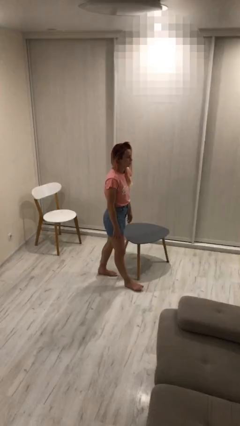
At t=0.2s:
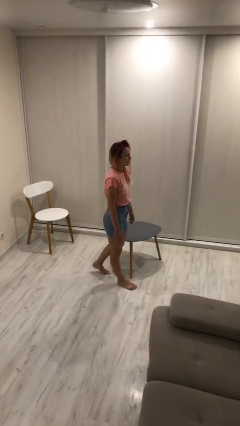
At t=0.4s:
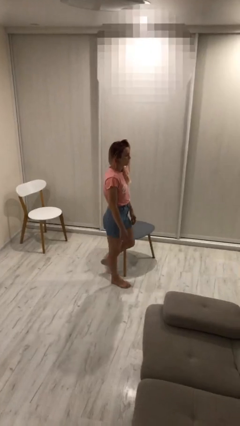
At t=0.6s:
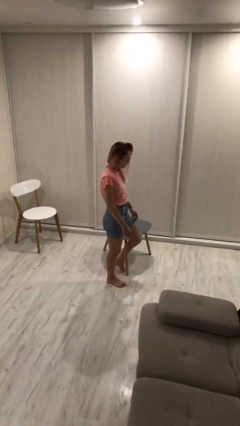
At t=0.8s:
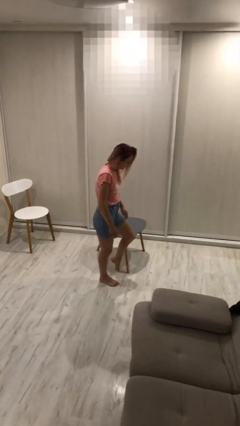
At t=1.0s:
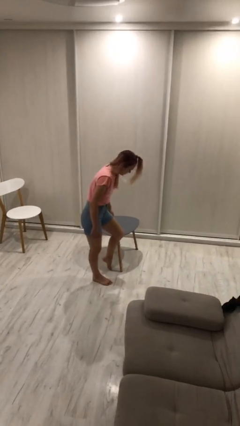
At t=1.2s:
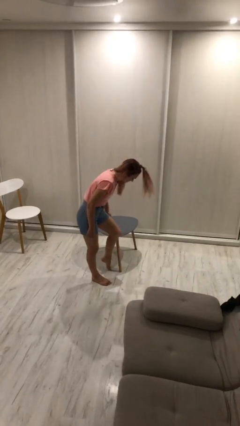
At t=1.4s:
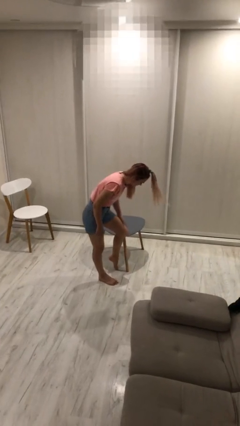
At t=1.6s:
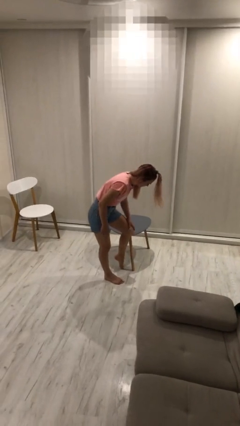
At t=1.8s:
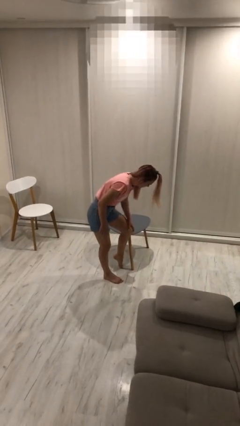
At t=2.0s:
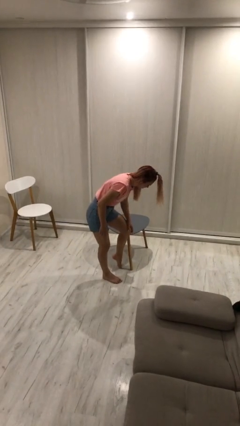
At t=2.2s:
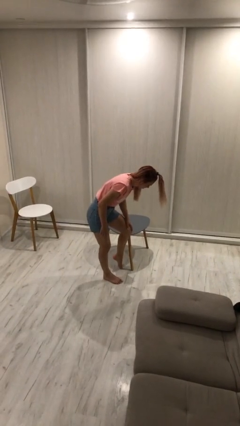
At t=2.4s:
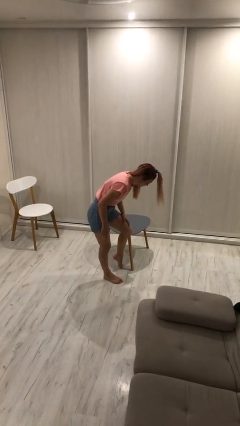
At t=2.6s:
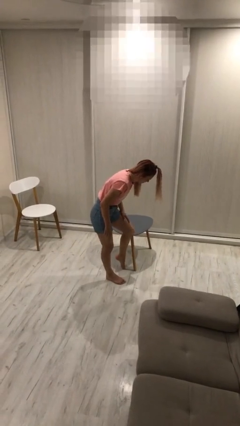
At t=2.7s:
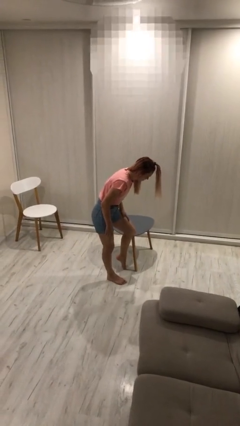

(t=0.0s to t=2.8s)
person stubs toe

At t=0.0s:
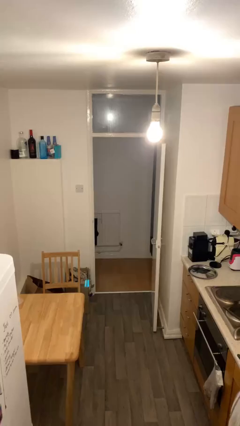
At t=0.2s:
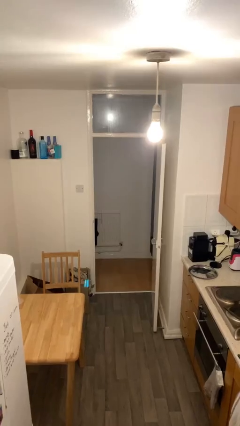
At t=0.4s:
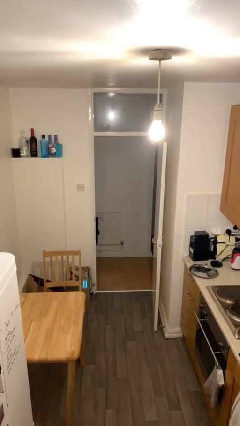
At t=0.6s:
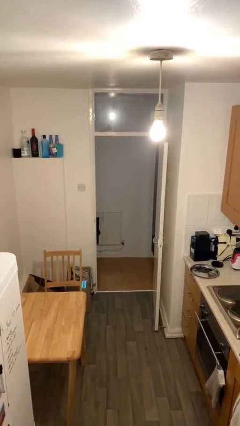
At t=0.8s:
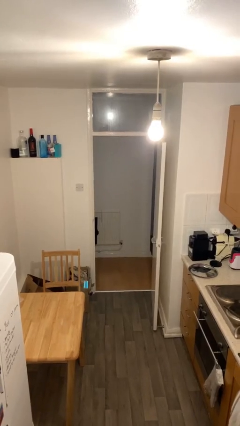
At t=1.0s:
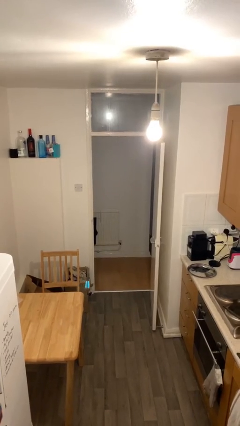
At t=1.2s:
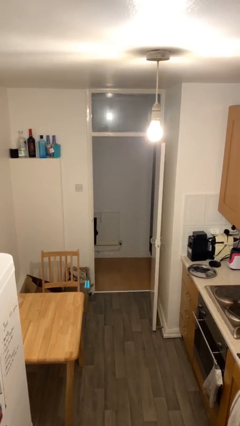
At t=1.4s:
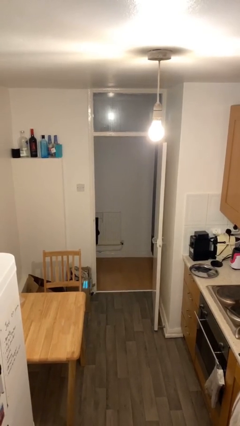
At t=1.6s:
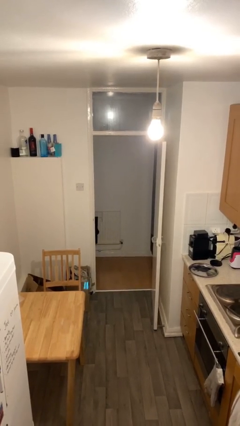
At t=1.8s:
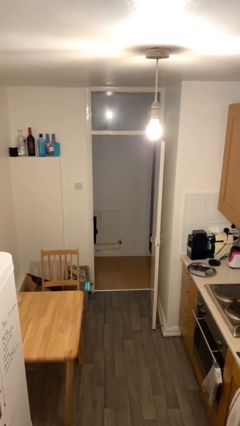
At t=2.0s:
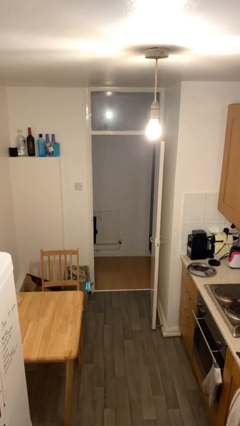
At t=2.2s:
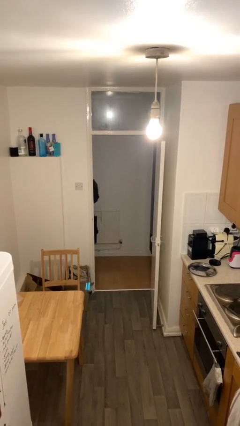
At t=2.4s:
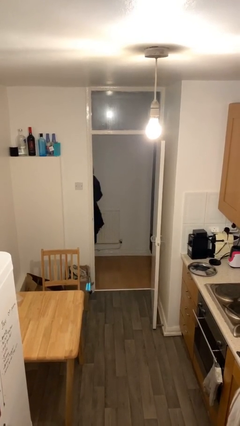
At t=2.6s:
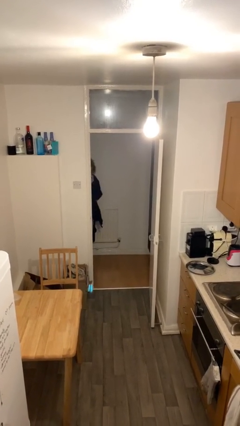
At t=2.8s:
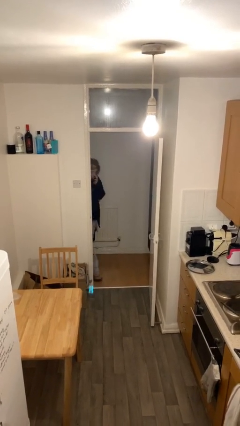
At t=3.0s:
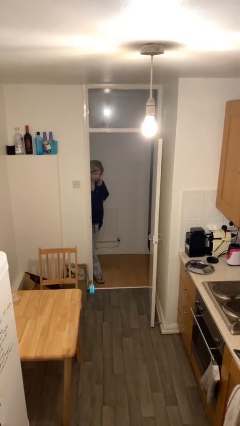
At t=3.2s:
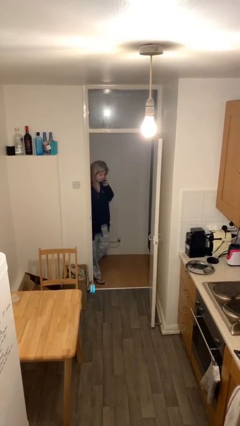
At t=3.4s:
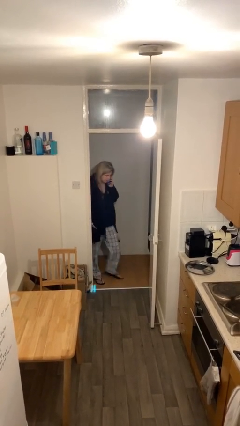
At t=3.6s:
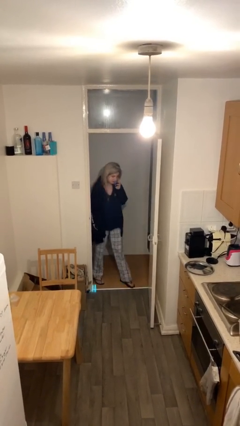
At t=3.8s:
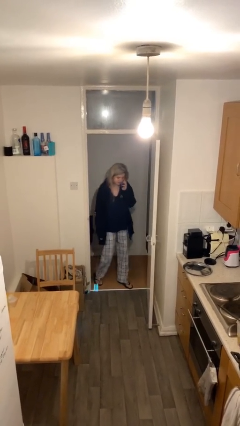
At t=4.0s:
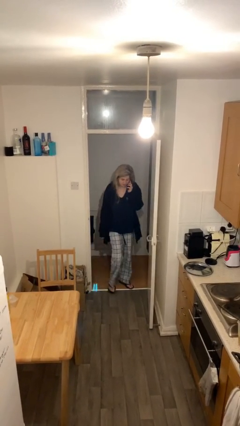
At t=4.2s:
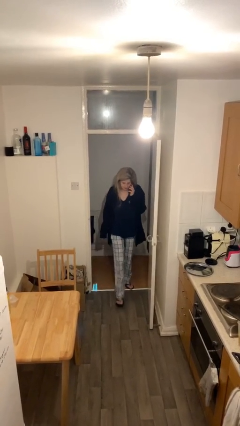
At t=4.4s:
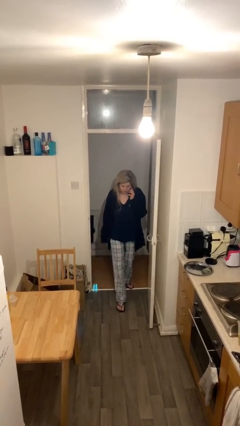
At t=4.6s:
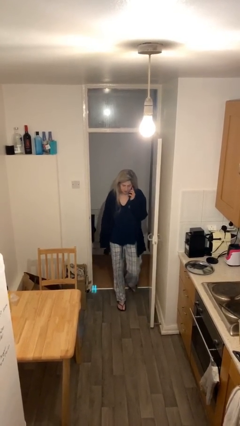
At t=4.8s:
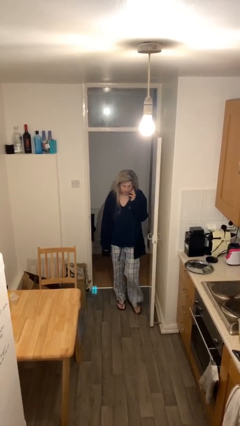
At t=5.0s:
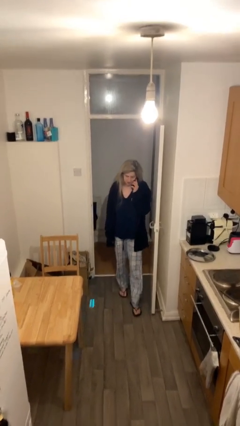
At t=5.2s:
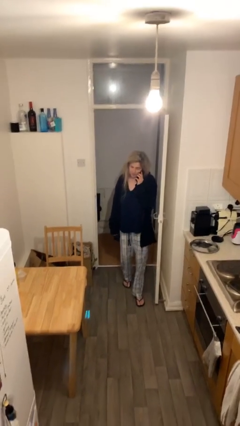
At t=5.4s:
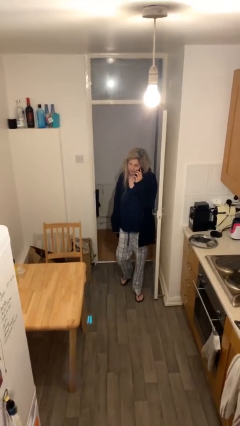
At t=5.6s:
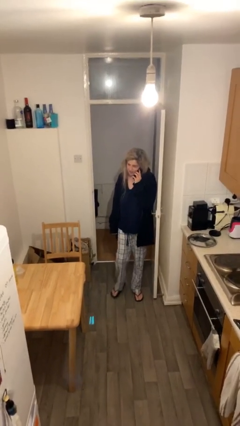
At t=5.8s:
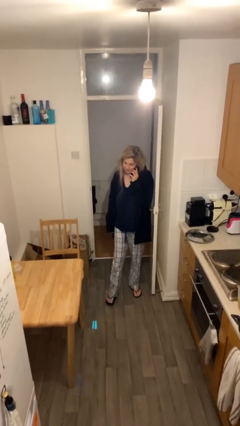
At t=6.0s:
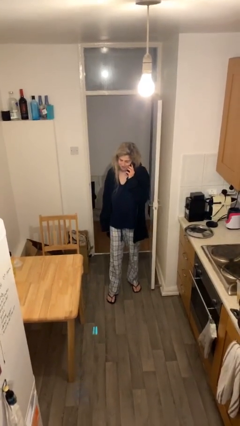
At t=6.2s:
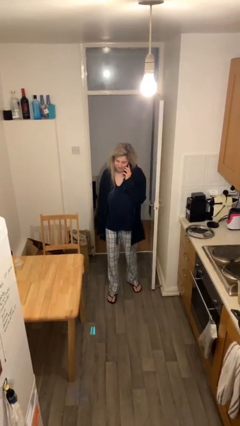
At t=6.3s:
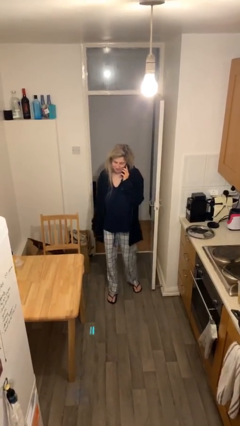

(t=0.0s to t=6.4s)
person enters scene through structure

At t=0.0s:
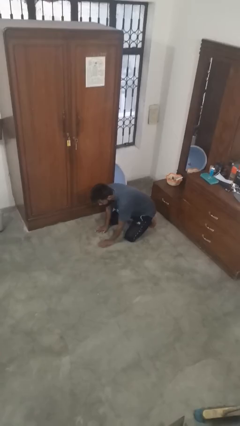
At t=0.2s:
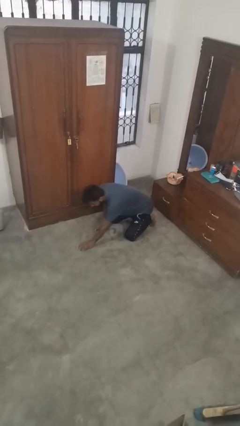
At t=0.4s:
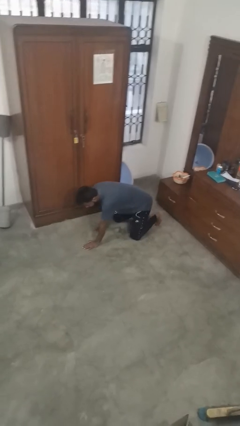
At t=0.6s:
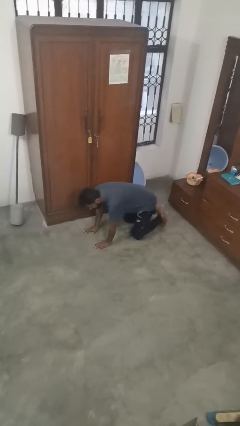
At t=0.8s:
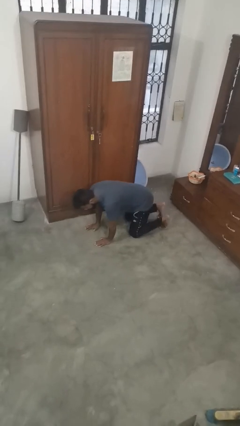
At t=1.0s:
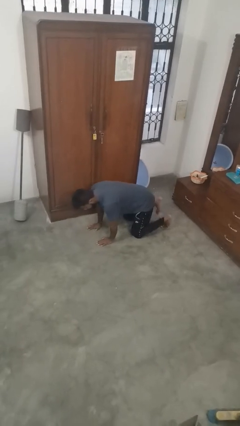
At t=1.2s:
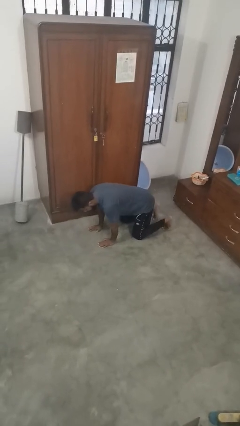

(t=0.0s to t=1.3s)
person crawls

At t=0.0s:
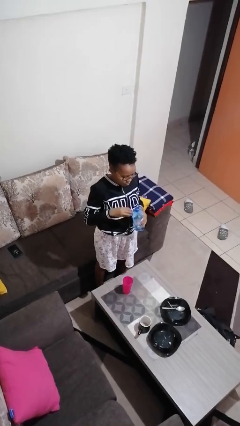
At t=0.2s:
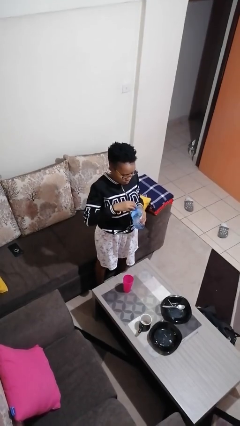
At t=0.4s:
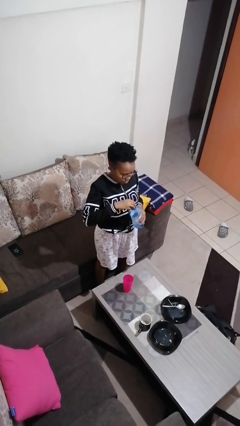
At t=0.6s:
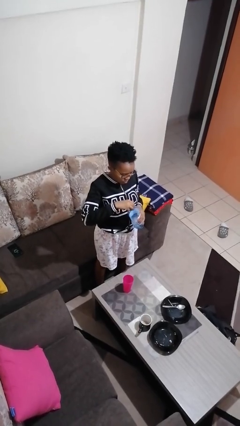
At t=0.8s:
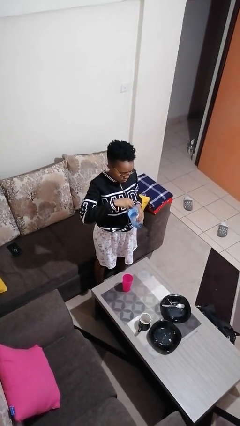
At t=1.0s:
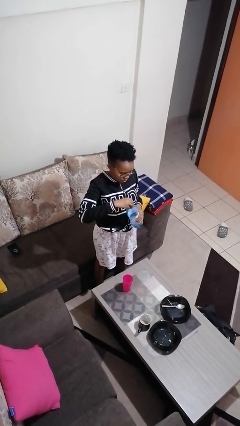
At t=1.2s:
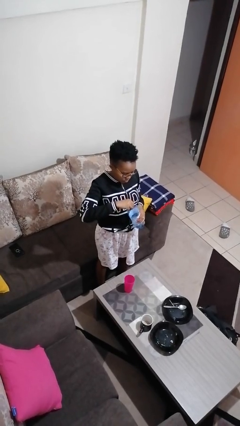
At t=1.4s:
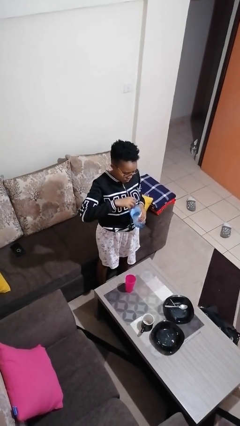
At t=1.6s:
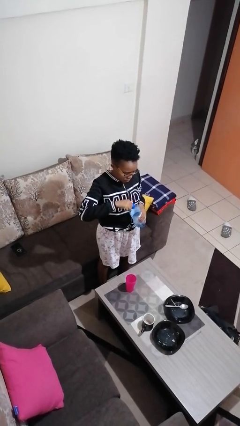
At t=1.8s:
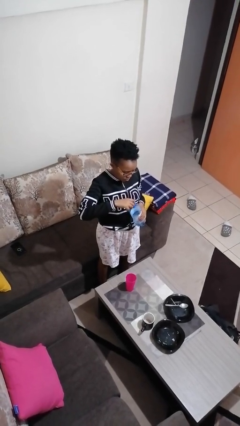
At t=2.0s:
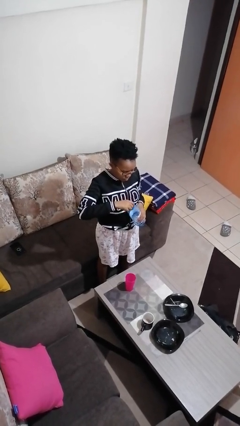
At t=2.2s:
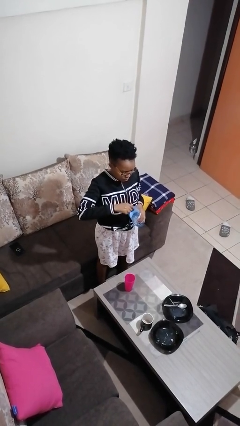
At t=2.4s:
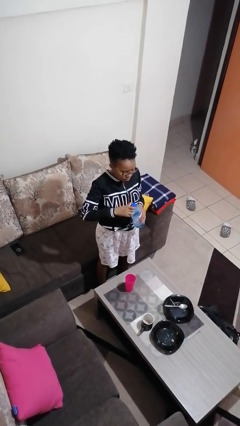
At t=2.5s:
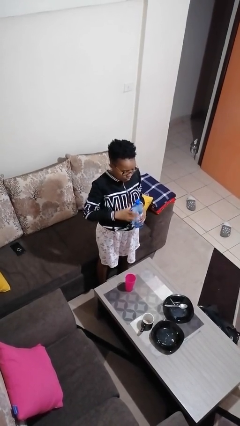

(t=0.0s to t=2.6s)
person screws lid to bottle

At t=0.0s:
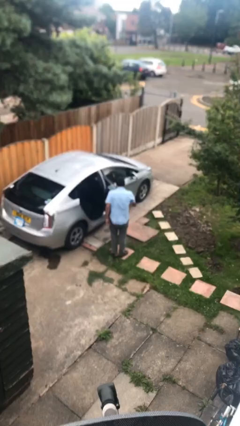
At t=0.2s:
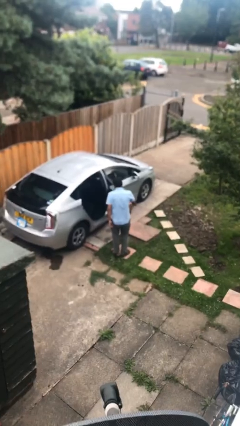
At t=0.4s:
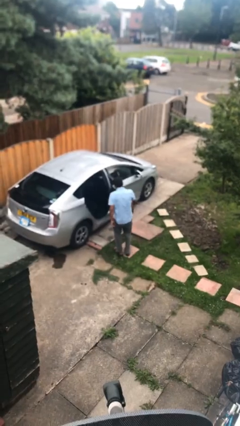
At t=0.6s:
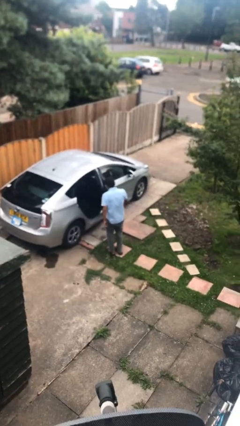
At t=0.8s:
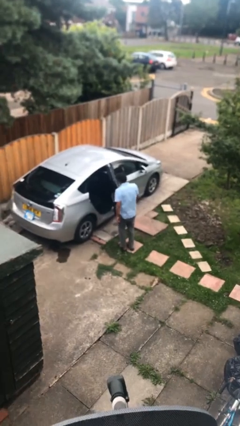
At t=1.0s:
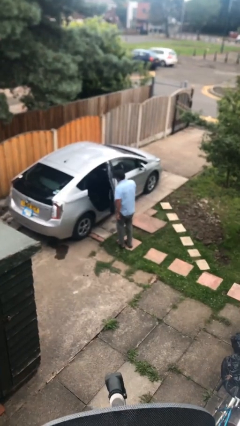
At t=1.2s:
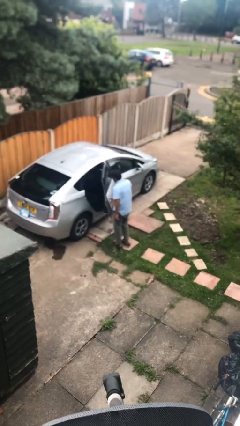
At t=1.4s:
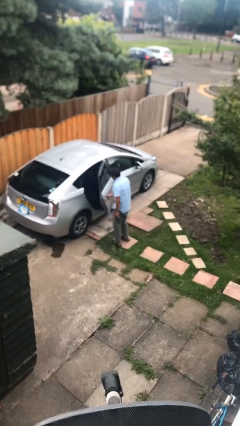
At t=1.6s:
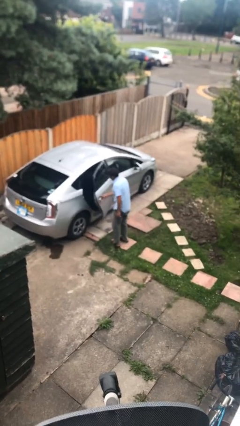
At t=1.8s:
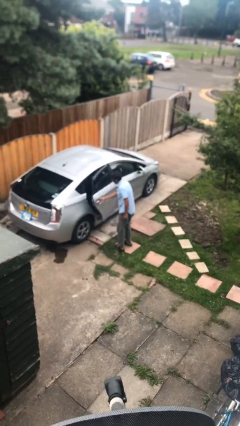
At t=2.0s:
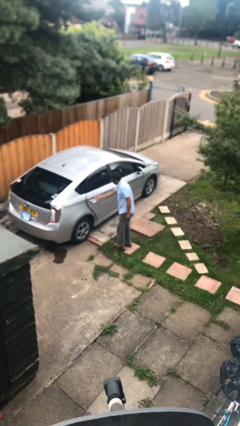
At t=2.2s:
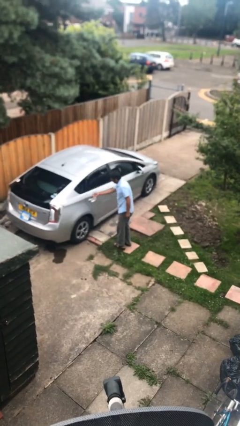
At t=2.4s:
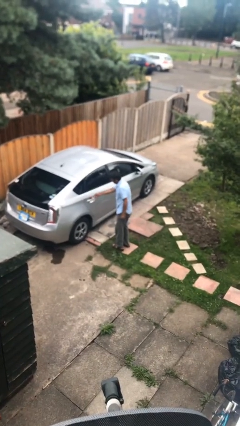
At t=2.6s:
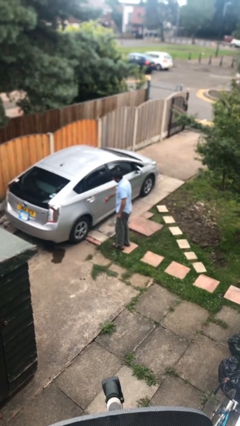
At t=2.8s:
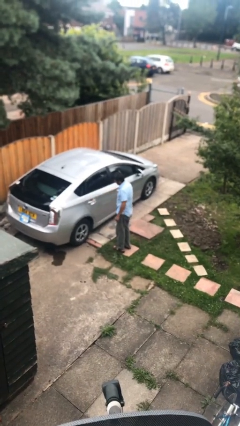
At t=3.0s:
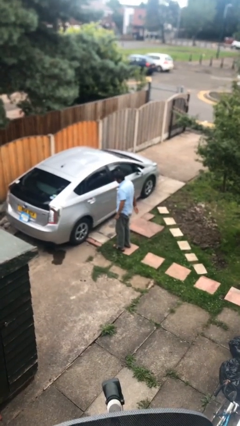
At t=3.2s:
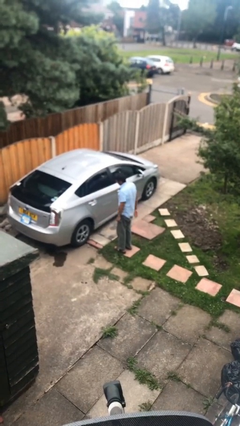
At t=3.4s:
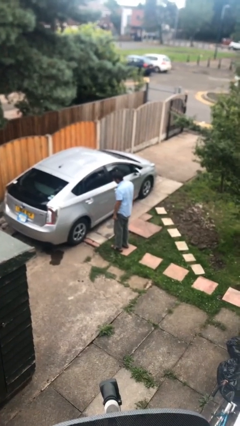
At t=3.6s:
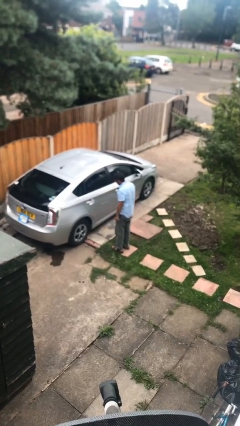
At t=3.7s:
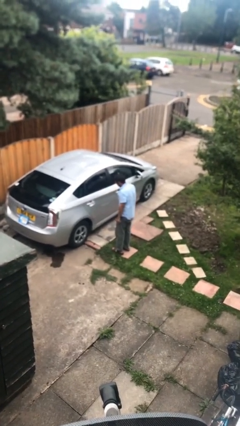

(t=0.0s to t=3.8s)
person closes car door

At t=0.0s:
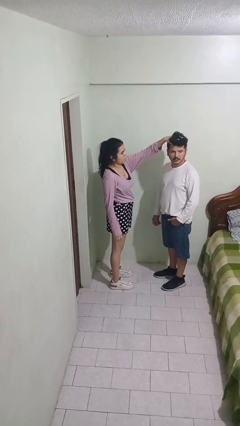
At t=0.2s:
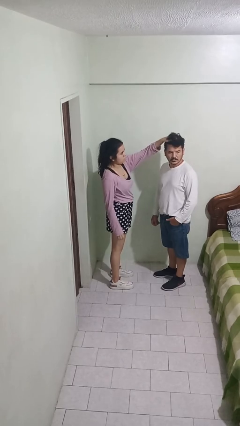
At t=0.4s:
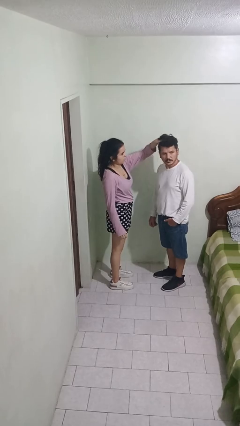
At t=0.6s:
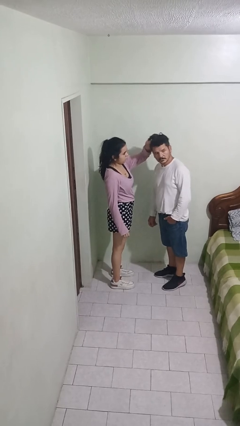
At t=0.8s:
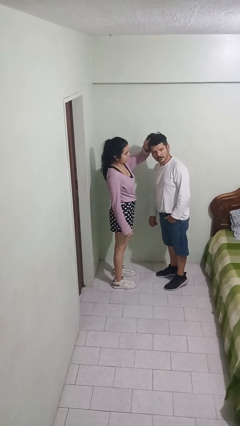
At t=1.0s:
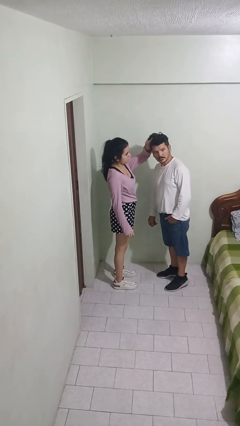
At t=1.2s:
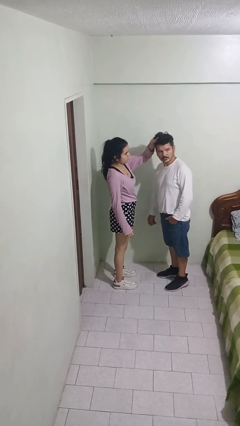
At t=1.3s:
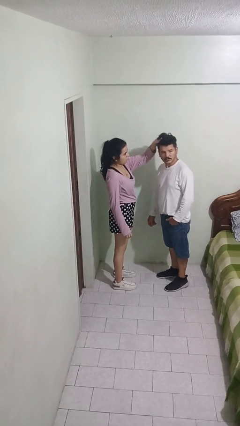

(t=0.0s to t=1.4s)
person grabs person by hair
